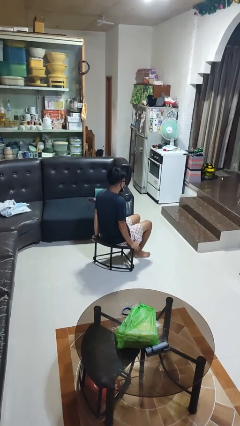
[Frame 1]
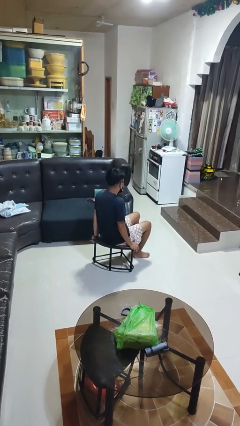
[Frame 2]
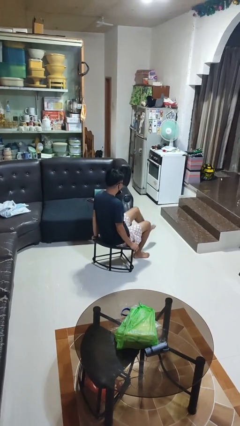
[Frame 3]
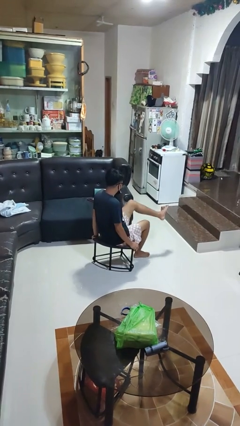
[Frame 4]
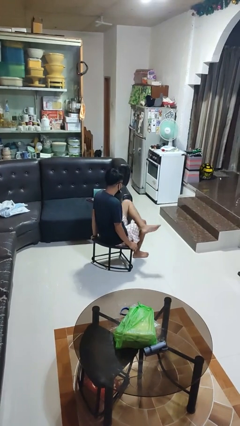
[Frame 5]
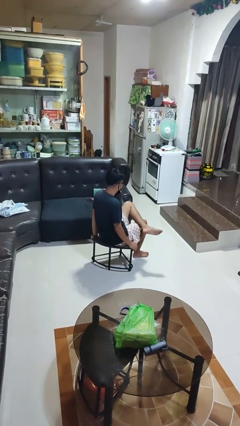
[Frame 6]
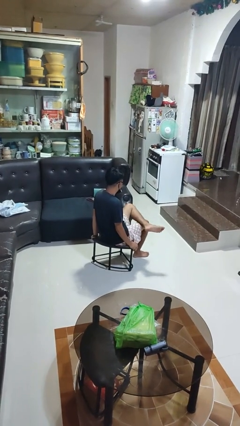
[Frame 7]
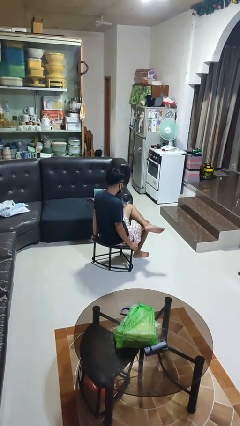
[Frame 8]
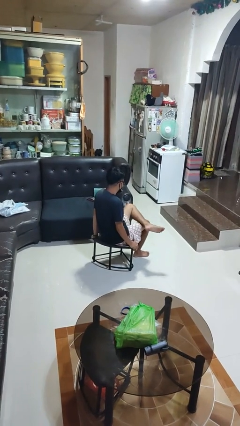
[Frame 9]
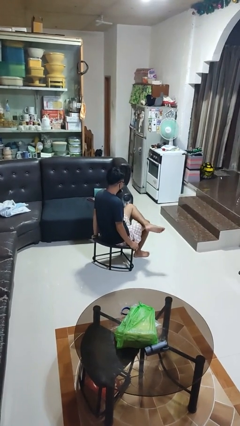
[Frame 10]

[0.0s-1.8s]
person crosses legs

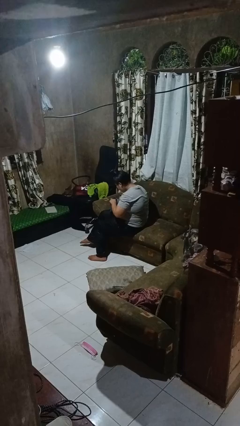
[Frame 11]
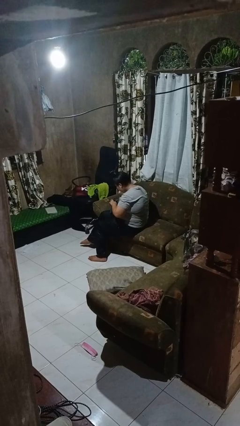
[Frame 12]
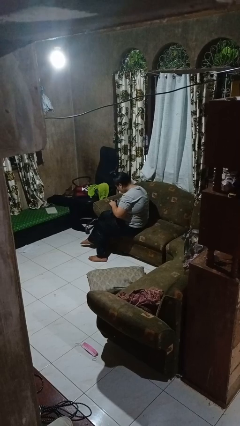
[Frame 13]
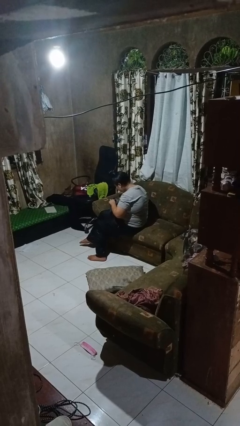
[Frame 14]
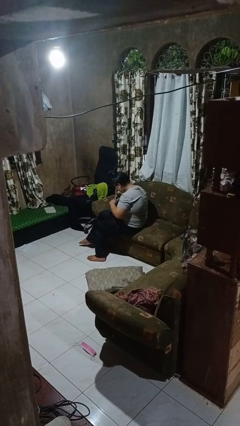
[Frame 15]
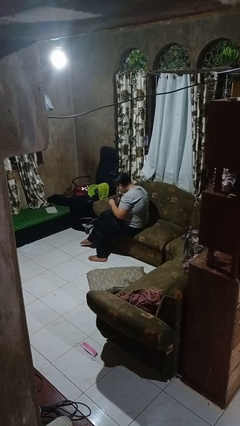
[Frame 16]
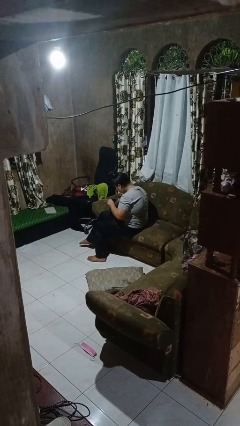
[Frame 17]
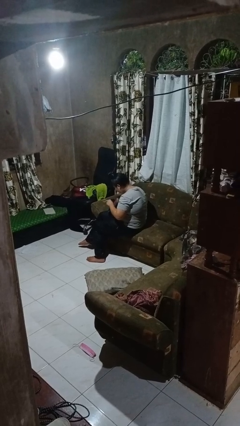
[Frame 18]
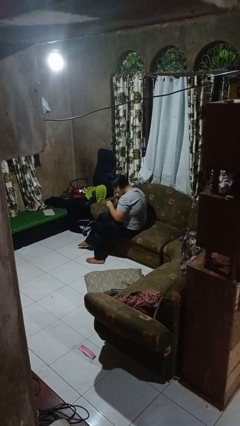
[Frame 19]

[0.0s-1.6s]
person searches in purse

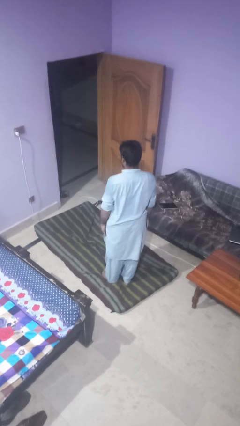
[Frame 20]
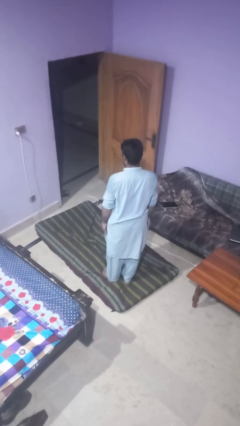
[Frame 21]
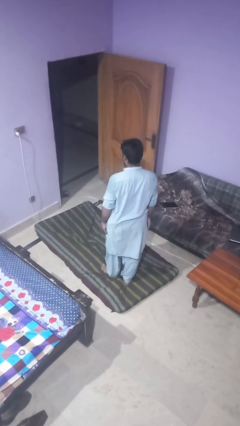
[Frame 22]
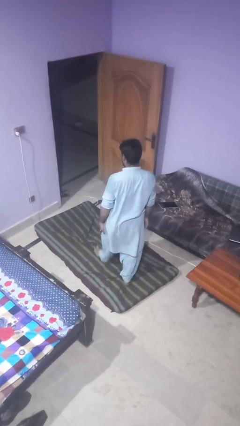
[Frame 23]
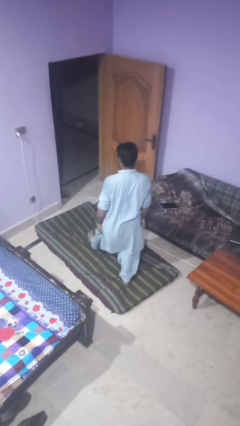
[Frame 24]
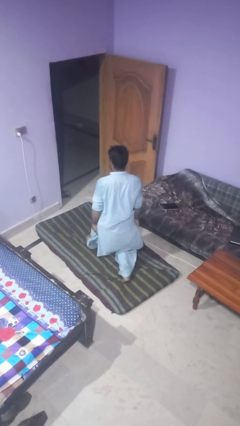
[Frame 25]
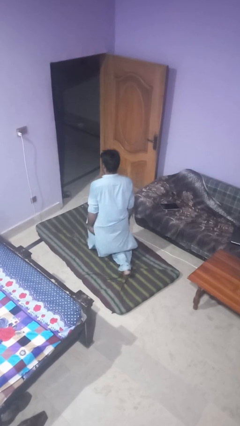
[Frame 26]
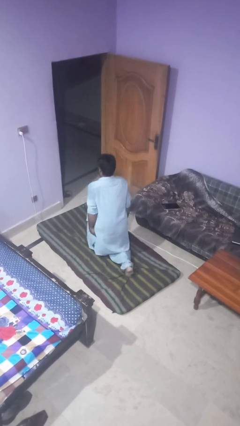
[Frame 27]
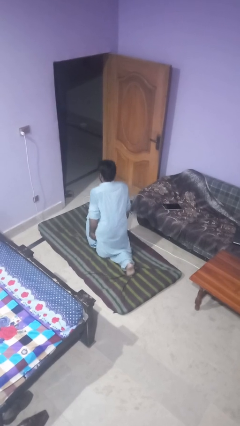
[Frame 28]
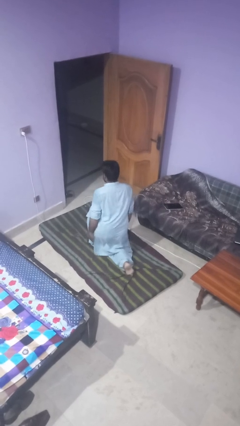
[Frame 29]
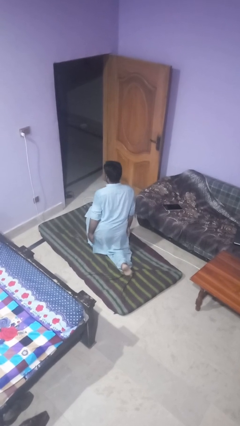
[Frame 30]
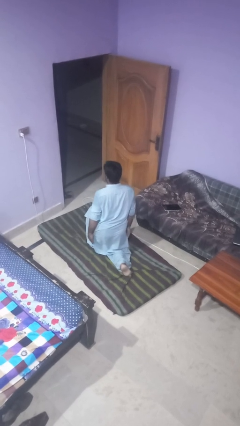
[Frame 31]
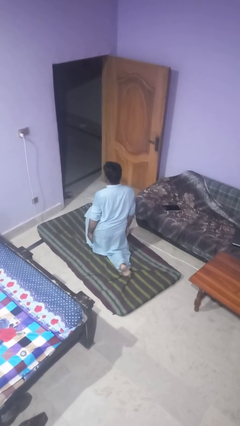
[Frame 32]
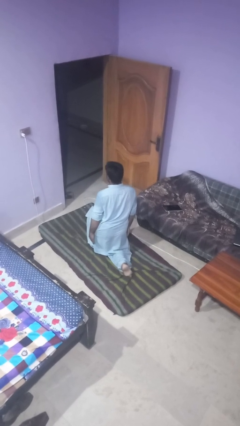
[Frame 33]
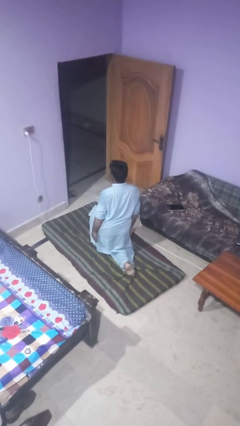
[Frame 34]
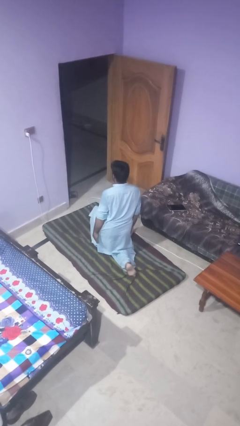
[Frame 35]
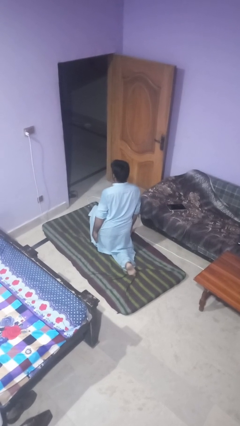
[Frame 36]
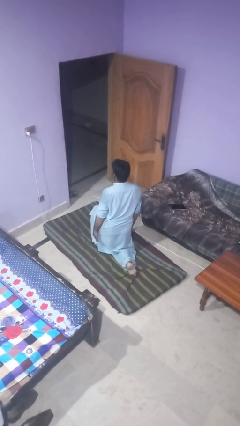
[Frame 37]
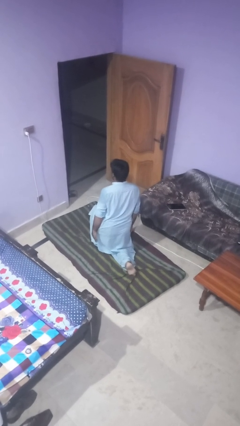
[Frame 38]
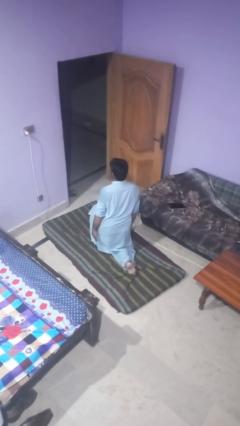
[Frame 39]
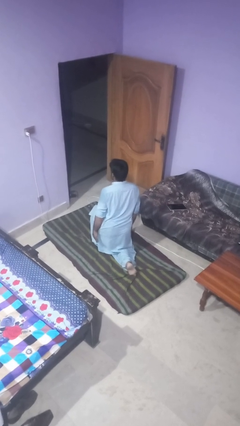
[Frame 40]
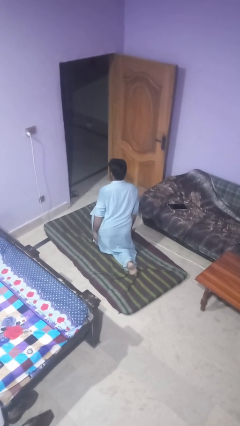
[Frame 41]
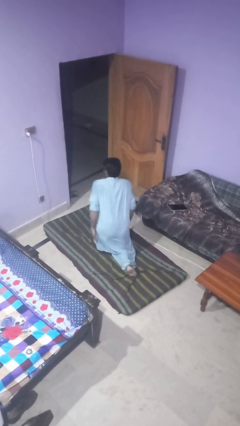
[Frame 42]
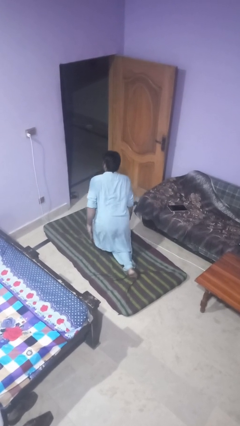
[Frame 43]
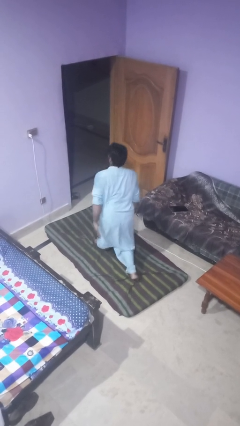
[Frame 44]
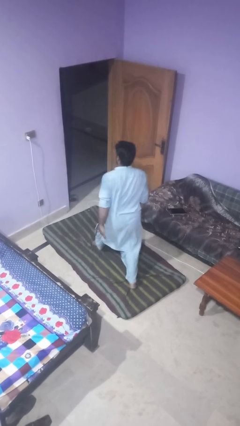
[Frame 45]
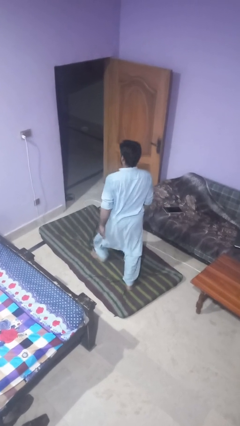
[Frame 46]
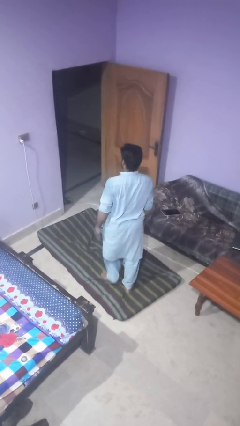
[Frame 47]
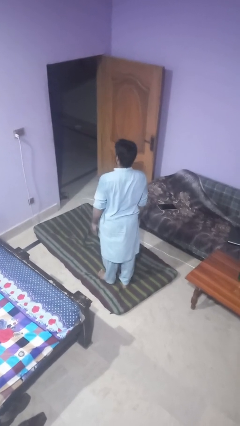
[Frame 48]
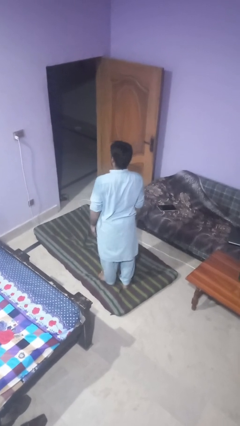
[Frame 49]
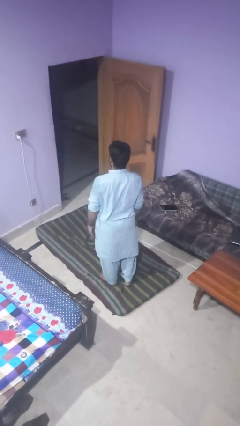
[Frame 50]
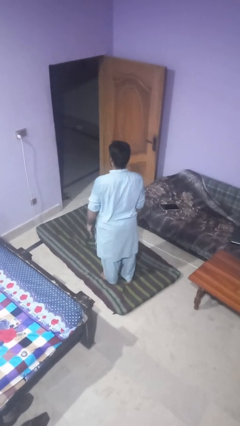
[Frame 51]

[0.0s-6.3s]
person exercises with lunges

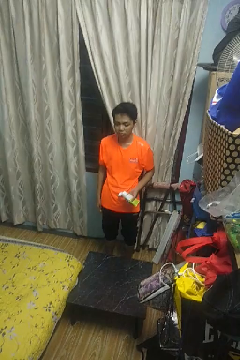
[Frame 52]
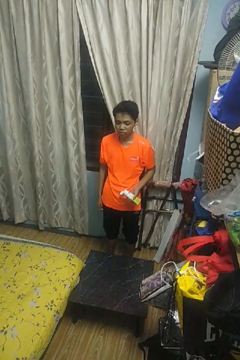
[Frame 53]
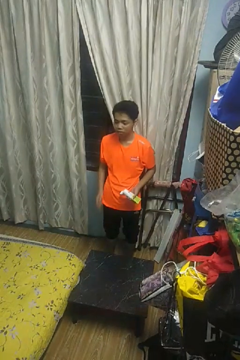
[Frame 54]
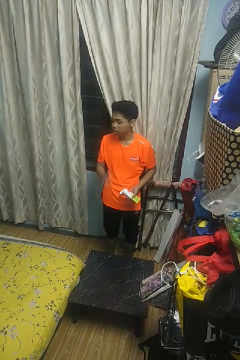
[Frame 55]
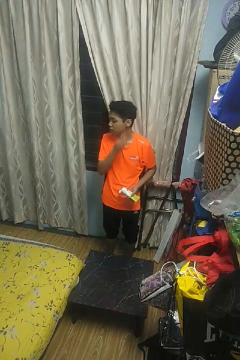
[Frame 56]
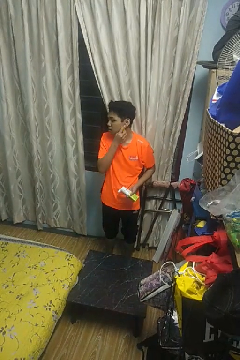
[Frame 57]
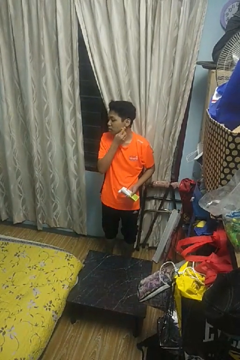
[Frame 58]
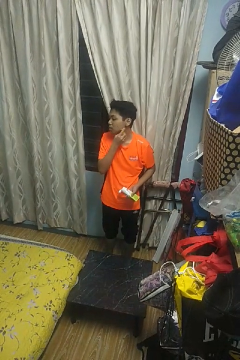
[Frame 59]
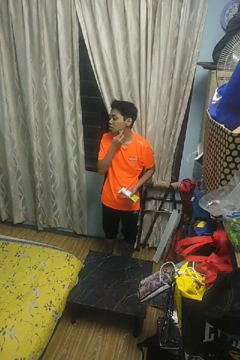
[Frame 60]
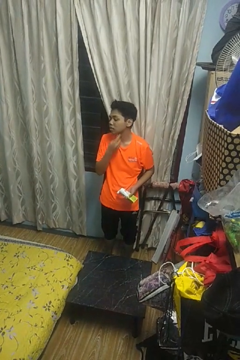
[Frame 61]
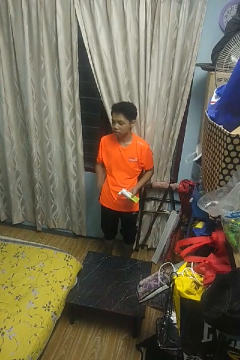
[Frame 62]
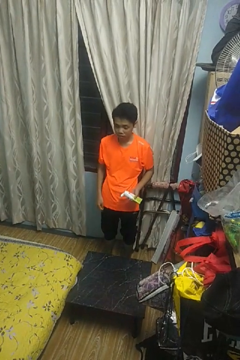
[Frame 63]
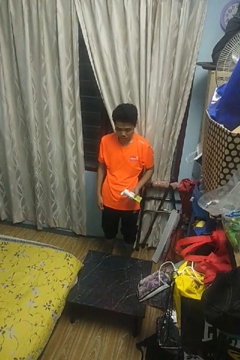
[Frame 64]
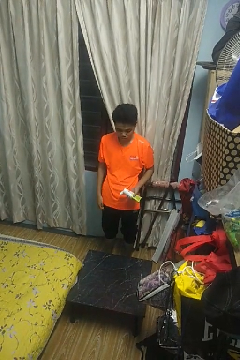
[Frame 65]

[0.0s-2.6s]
person shaves face

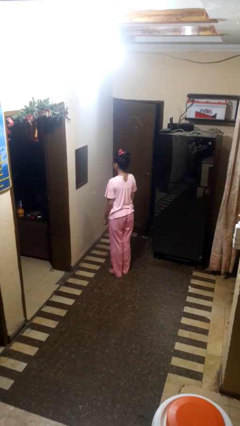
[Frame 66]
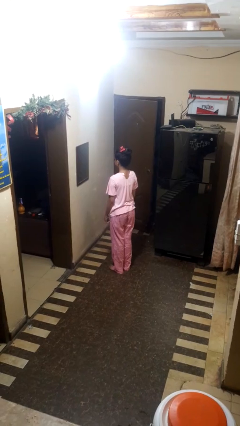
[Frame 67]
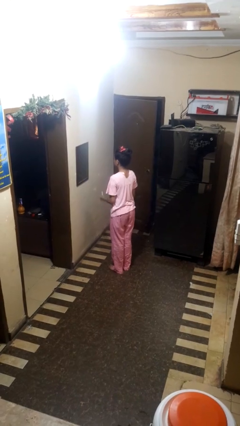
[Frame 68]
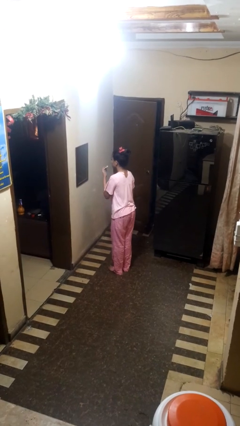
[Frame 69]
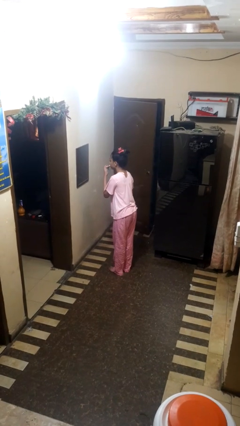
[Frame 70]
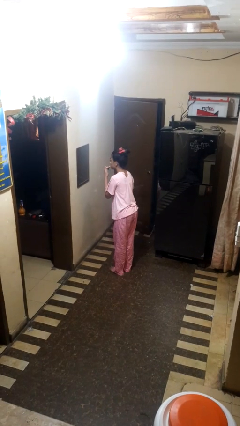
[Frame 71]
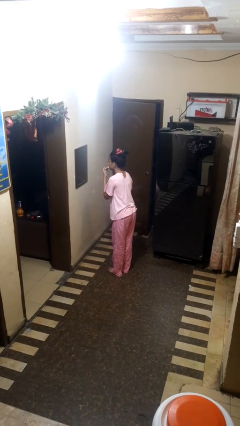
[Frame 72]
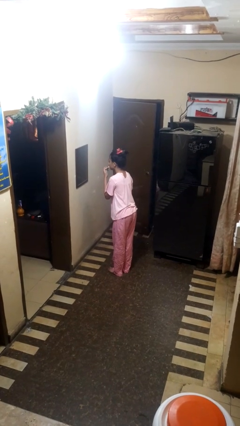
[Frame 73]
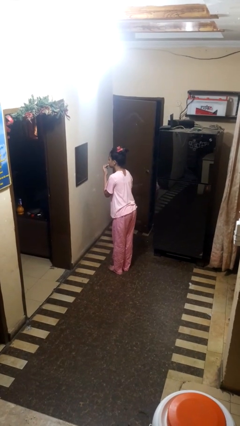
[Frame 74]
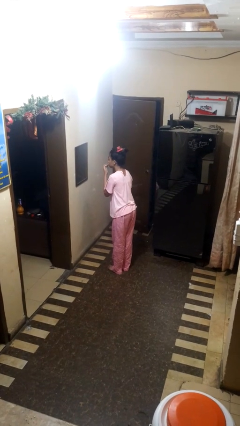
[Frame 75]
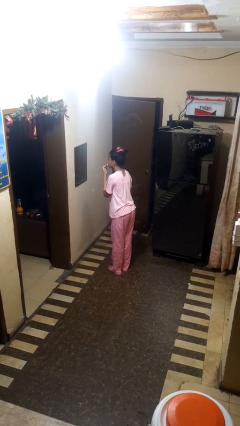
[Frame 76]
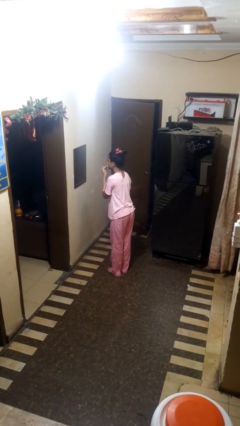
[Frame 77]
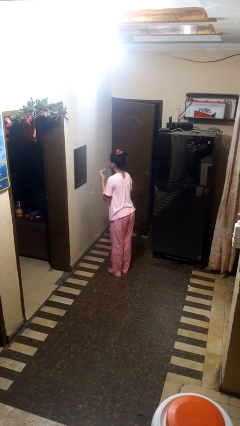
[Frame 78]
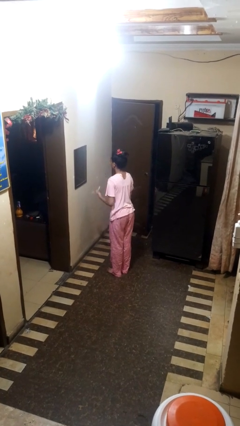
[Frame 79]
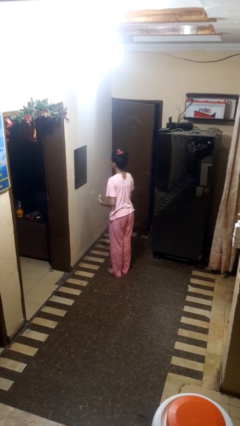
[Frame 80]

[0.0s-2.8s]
person applies lip makeup

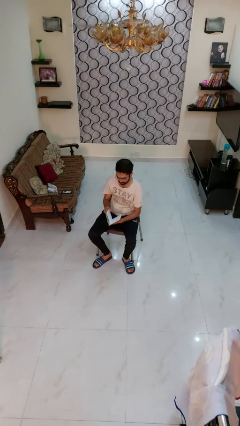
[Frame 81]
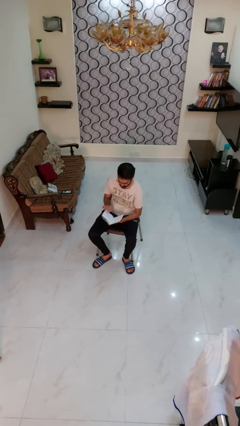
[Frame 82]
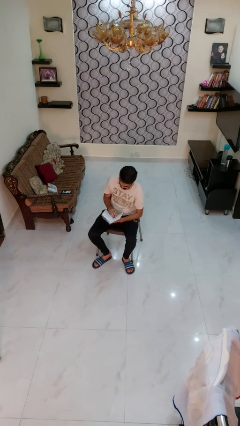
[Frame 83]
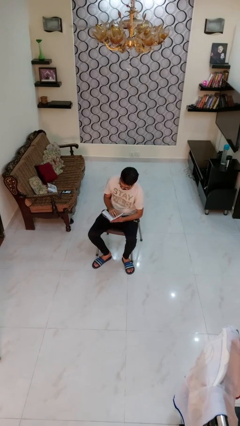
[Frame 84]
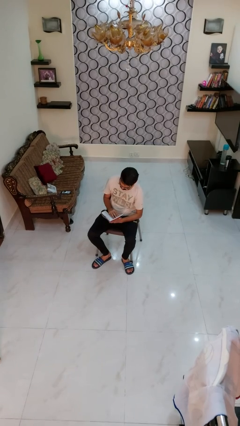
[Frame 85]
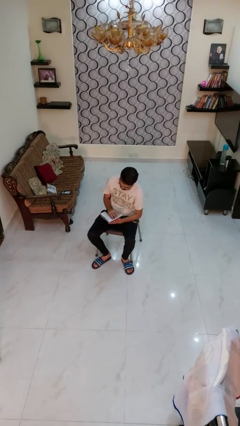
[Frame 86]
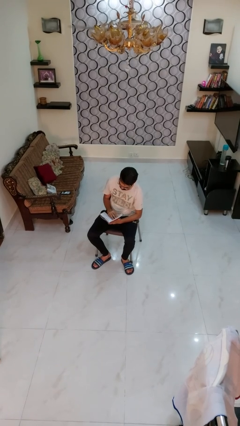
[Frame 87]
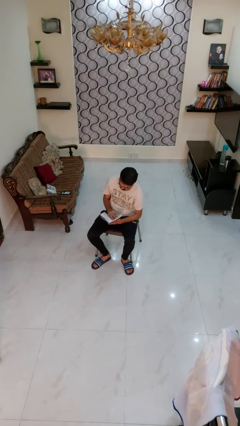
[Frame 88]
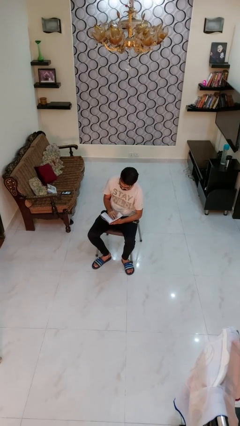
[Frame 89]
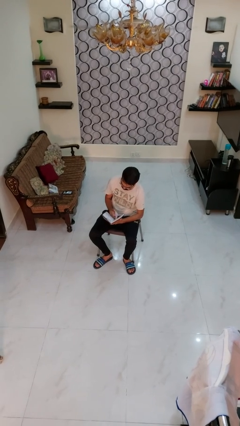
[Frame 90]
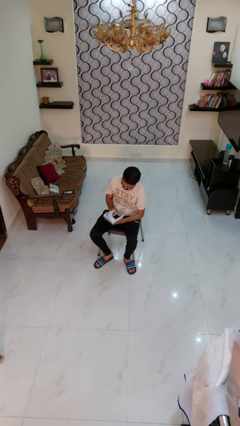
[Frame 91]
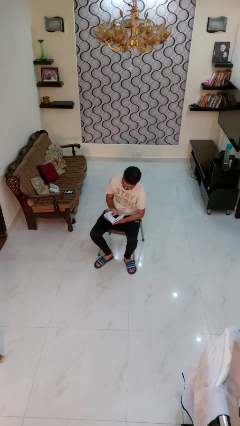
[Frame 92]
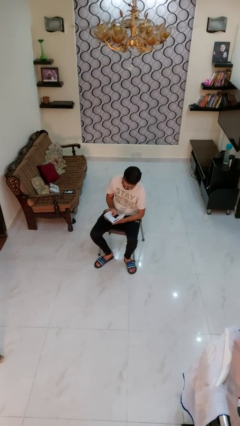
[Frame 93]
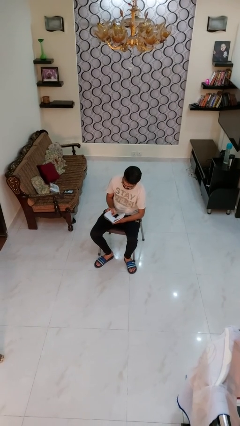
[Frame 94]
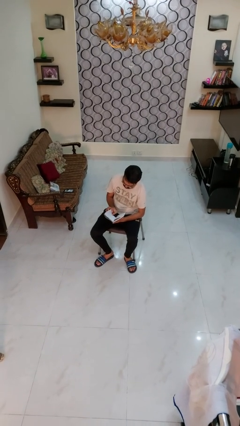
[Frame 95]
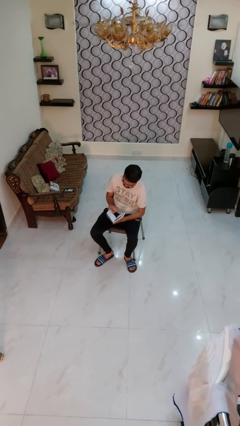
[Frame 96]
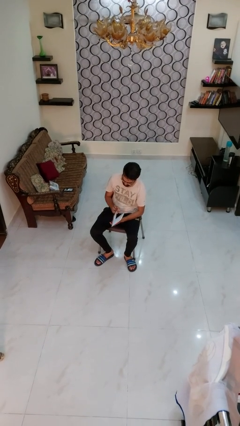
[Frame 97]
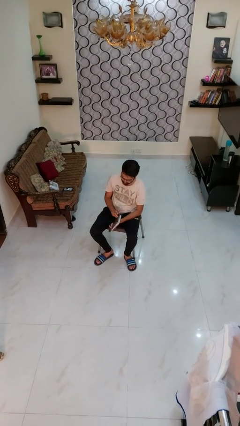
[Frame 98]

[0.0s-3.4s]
person reads book
